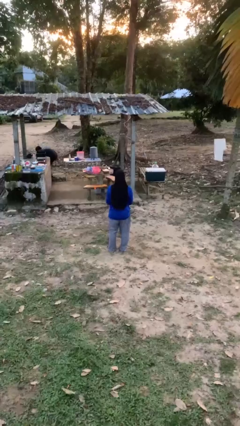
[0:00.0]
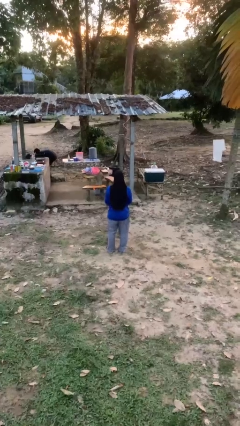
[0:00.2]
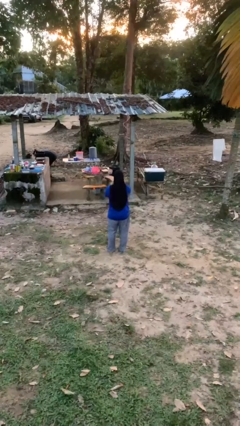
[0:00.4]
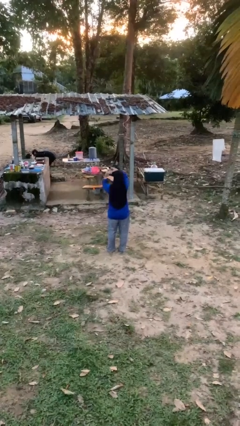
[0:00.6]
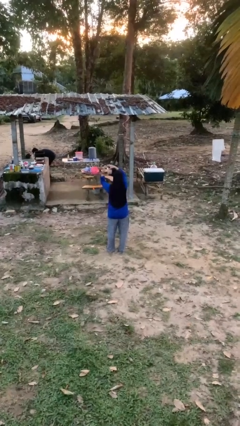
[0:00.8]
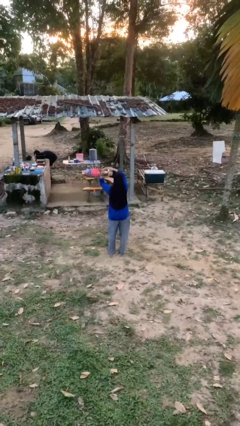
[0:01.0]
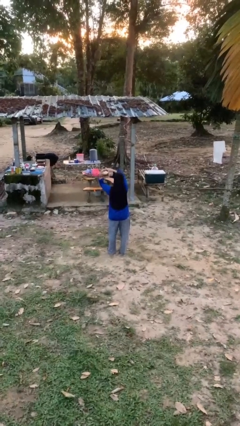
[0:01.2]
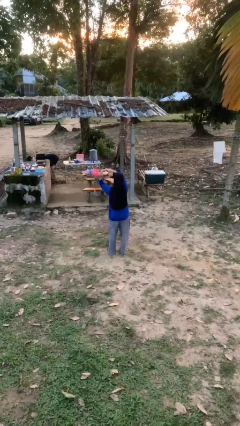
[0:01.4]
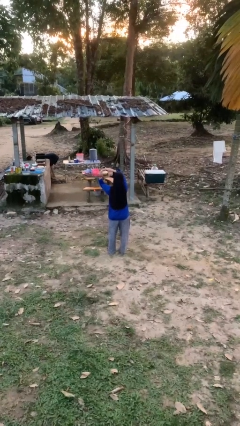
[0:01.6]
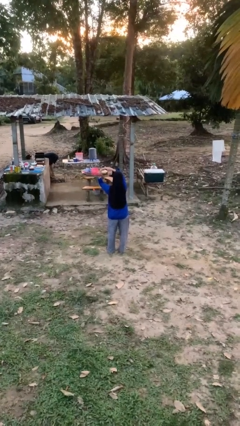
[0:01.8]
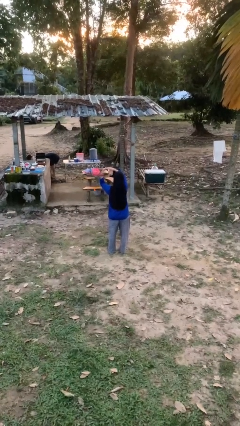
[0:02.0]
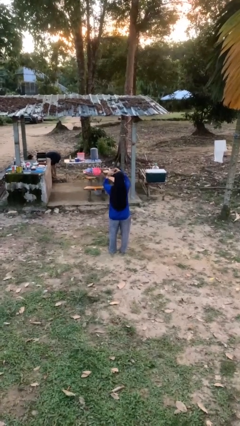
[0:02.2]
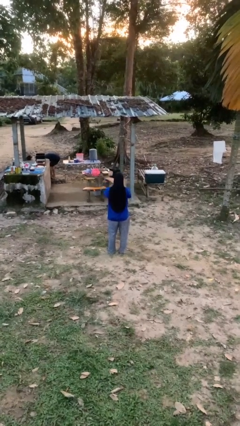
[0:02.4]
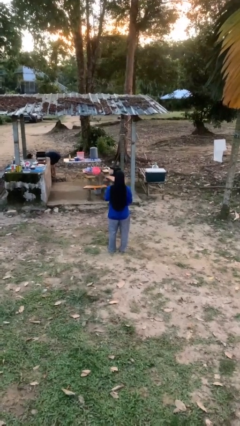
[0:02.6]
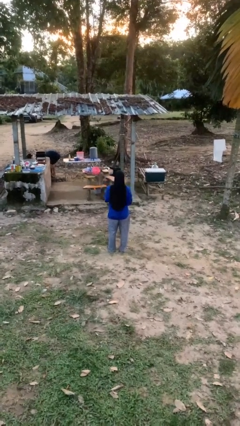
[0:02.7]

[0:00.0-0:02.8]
person gestures heart

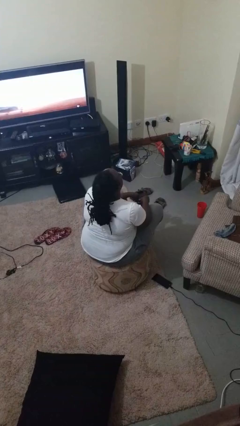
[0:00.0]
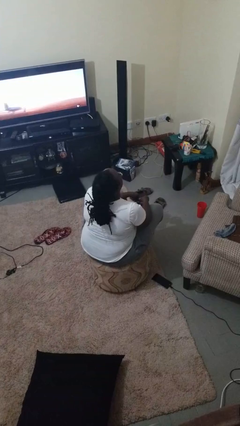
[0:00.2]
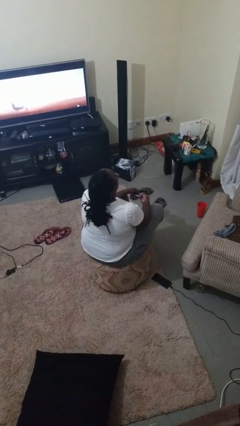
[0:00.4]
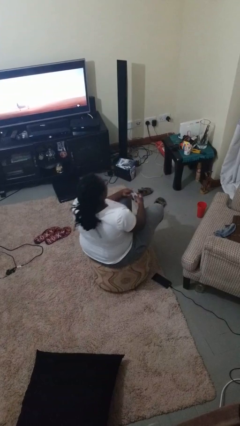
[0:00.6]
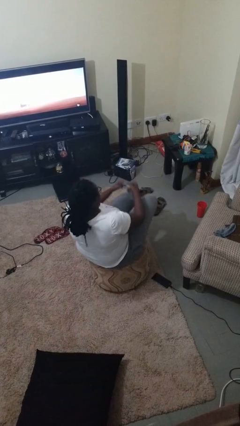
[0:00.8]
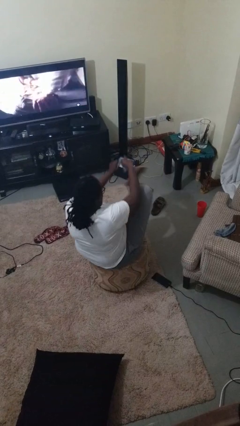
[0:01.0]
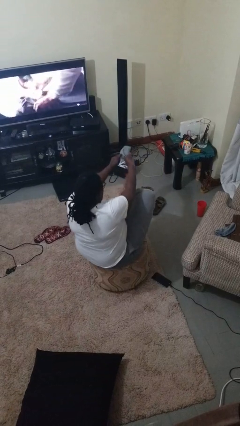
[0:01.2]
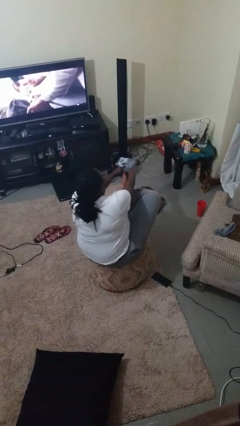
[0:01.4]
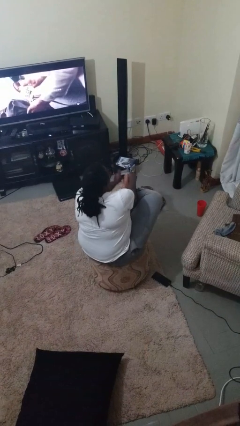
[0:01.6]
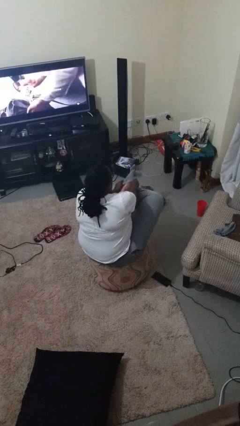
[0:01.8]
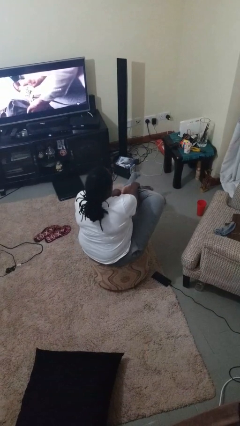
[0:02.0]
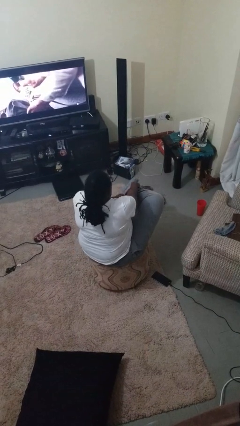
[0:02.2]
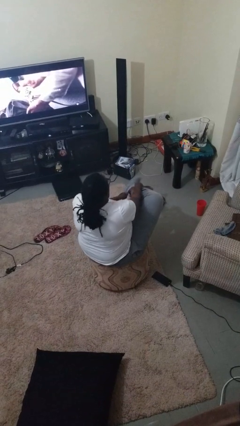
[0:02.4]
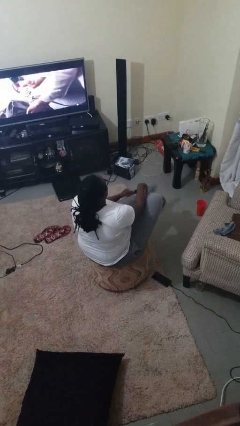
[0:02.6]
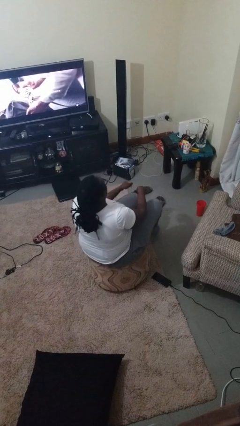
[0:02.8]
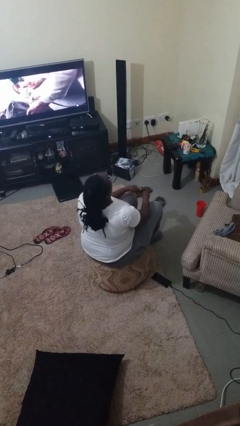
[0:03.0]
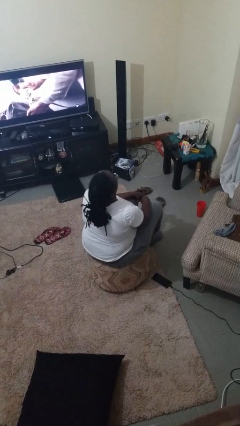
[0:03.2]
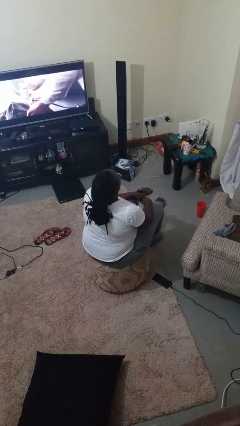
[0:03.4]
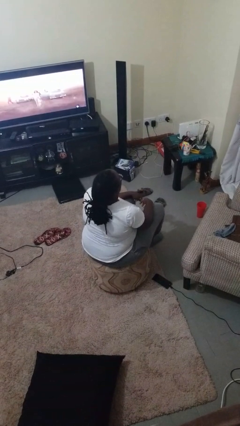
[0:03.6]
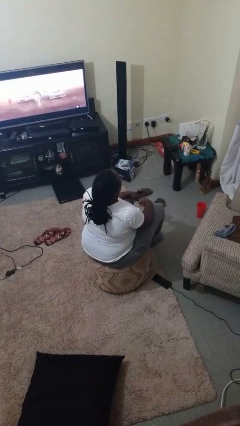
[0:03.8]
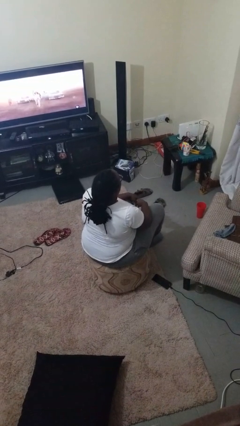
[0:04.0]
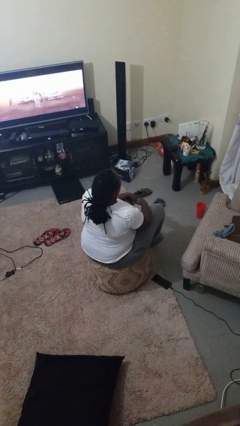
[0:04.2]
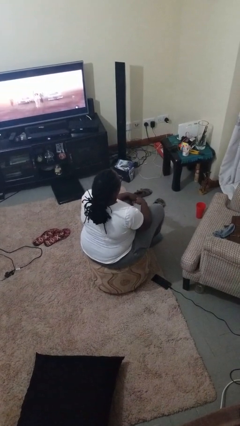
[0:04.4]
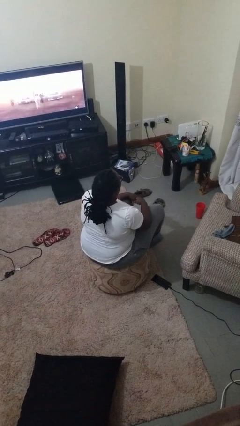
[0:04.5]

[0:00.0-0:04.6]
person puts on socks

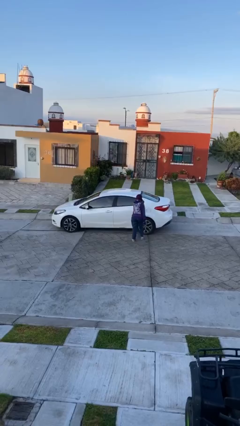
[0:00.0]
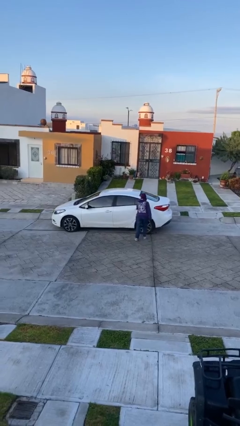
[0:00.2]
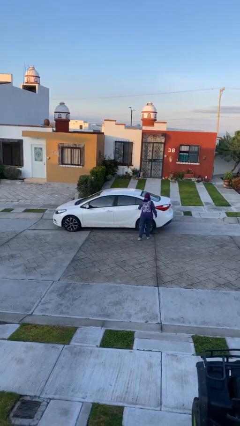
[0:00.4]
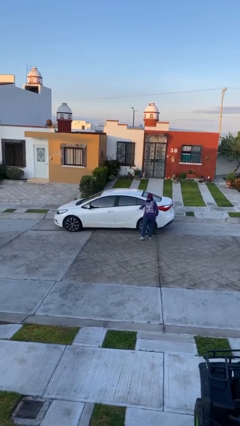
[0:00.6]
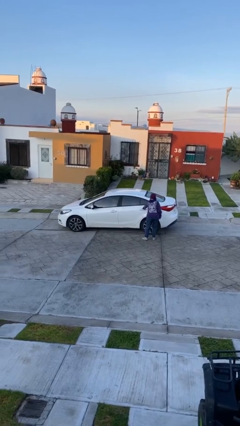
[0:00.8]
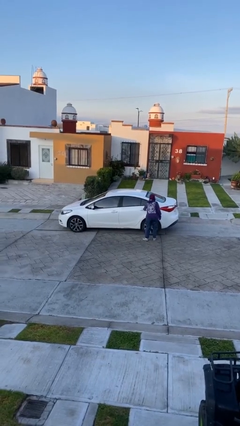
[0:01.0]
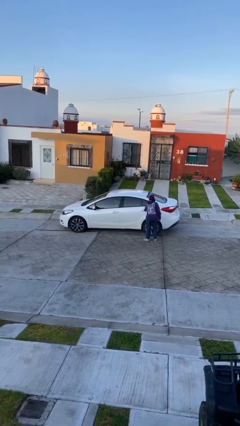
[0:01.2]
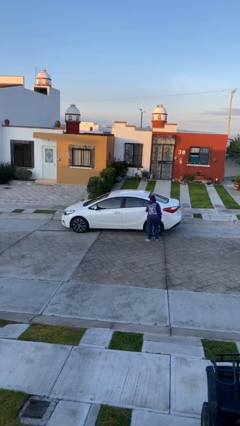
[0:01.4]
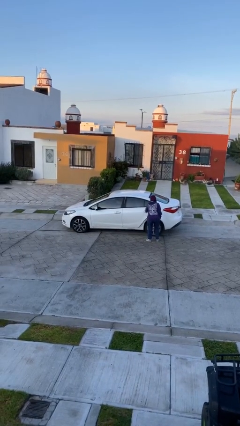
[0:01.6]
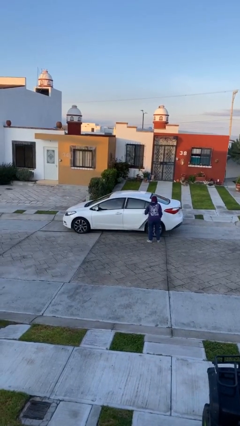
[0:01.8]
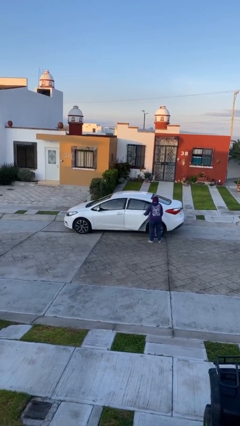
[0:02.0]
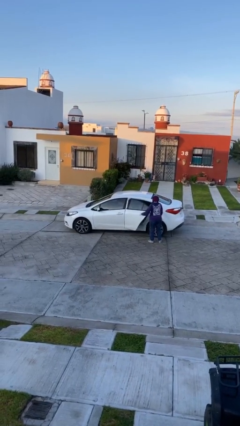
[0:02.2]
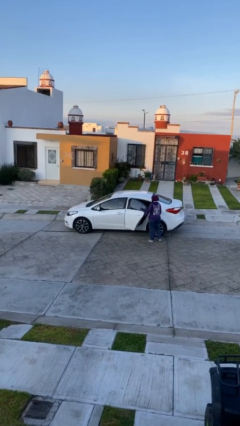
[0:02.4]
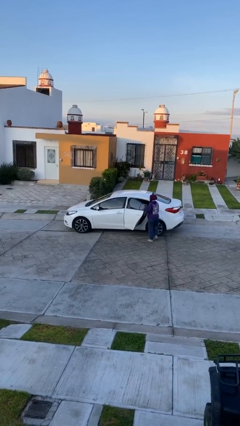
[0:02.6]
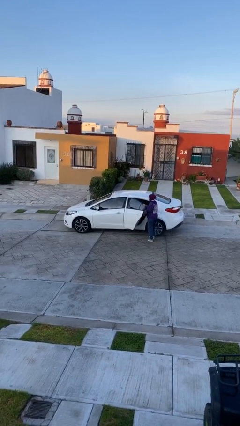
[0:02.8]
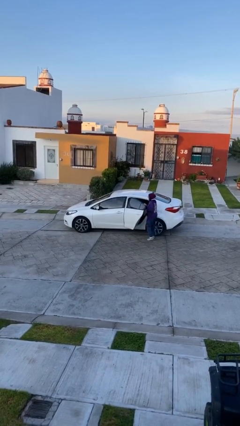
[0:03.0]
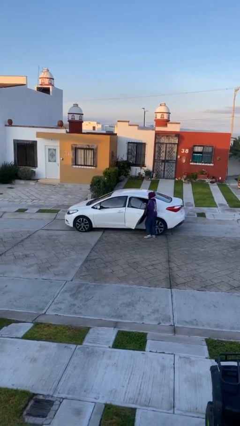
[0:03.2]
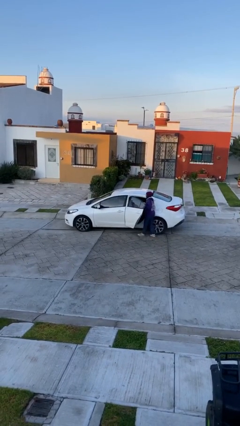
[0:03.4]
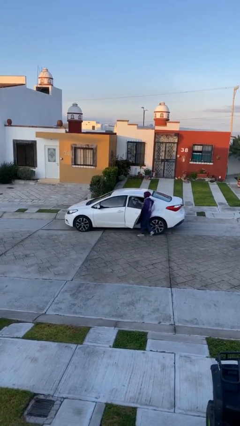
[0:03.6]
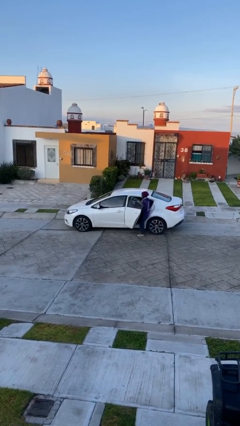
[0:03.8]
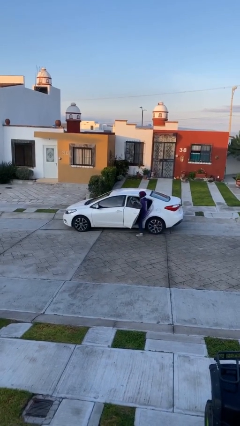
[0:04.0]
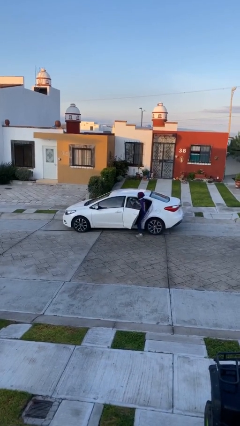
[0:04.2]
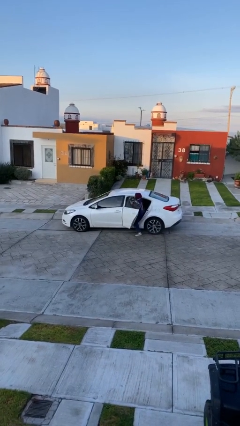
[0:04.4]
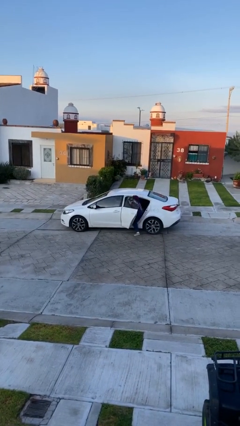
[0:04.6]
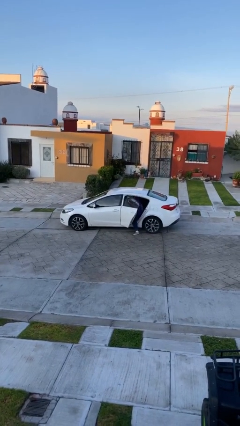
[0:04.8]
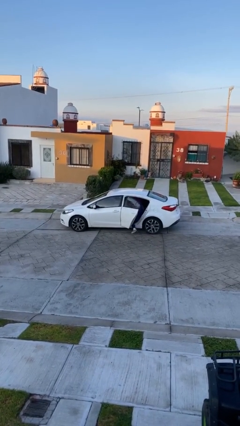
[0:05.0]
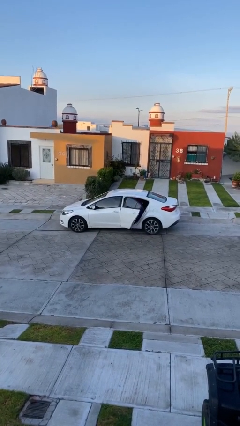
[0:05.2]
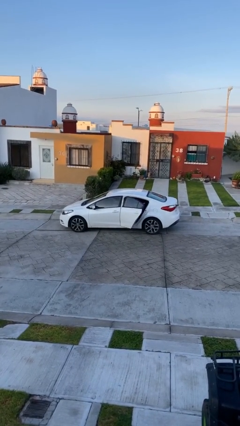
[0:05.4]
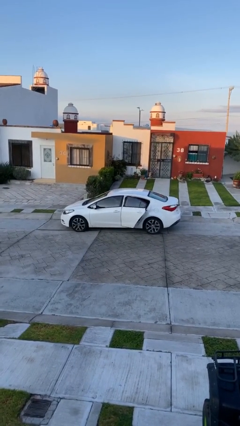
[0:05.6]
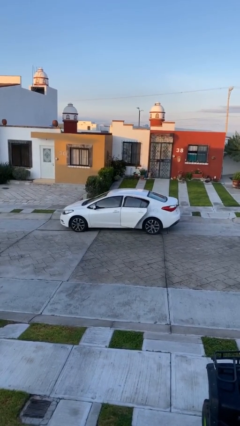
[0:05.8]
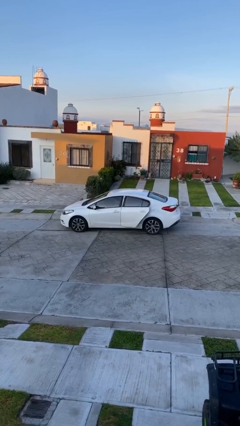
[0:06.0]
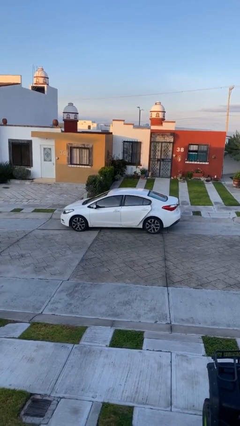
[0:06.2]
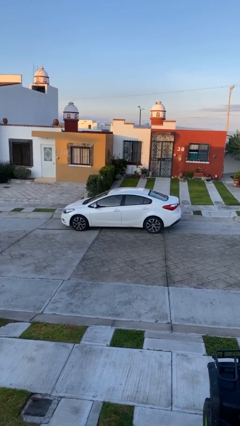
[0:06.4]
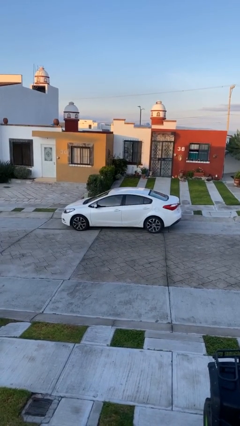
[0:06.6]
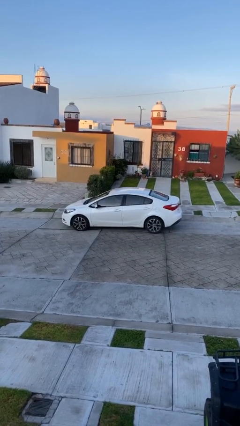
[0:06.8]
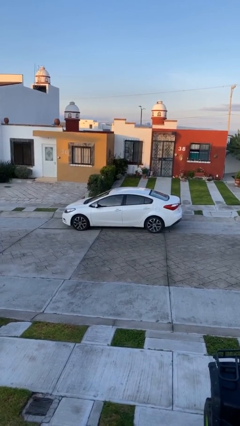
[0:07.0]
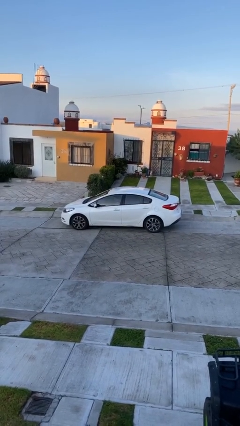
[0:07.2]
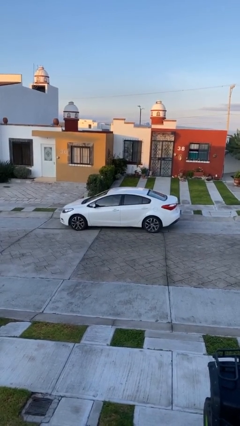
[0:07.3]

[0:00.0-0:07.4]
car picks up person

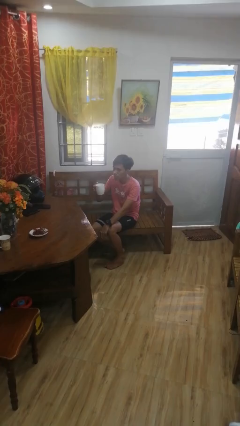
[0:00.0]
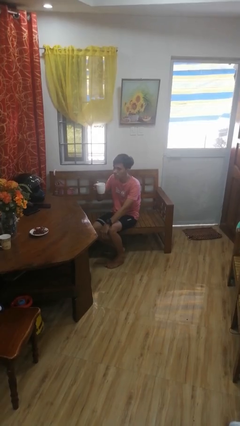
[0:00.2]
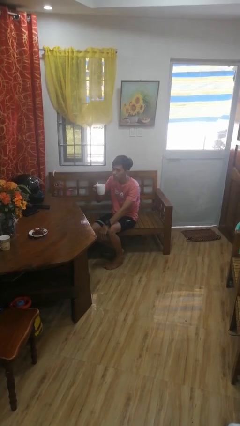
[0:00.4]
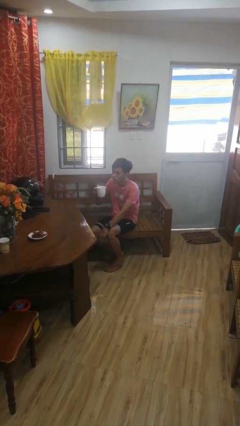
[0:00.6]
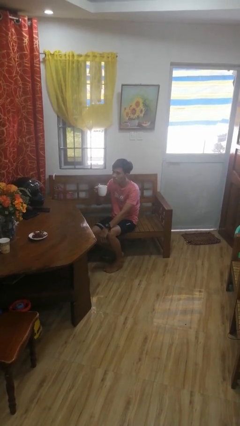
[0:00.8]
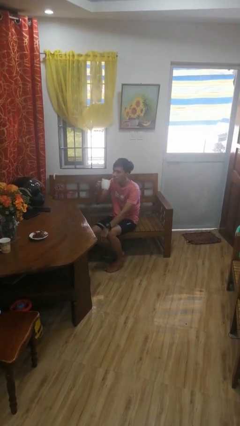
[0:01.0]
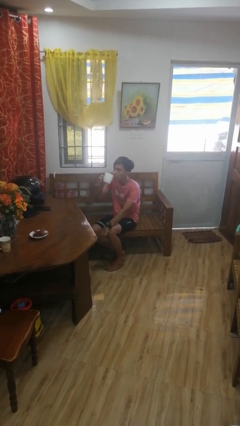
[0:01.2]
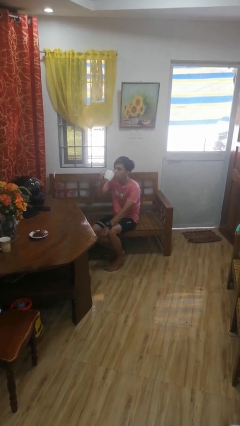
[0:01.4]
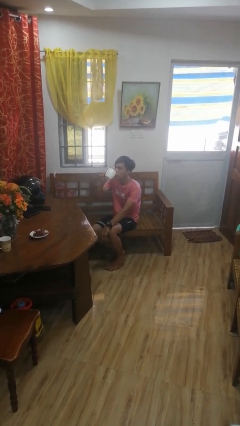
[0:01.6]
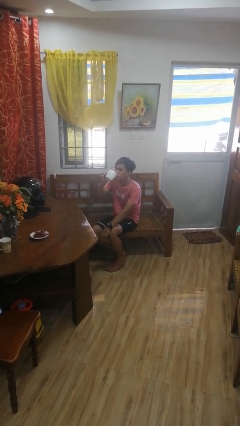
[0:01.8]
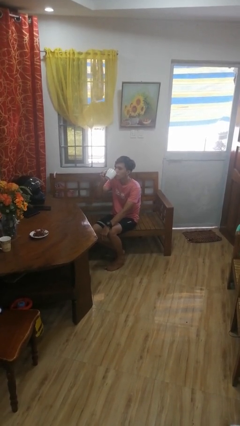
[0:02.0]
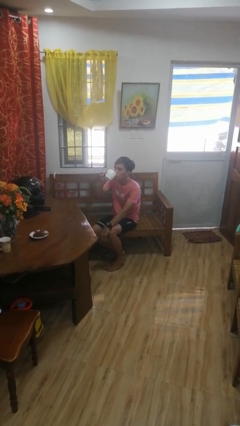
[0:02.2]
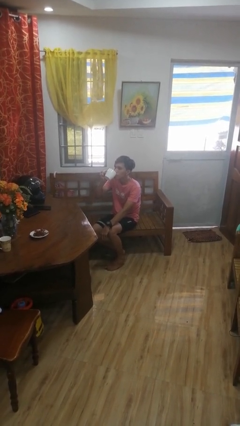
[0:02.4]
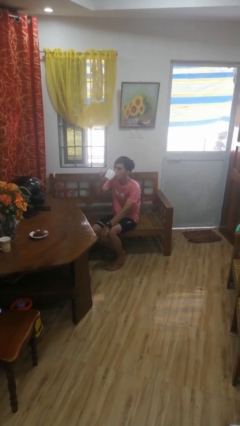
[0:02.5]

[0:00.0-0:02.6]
person drinks from mug
